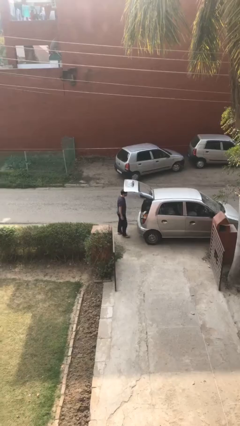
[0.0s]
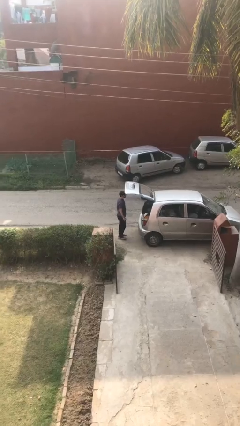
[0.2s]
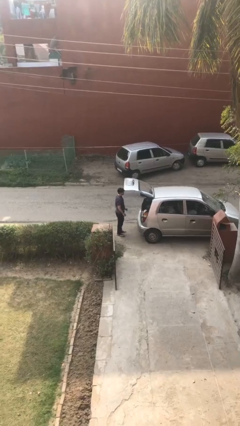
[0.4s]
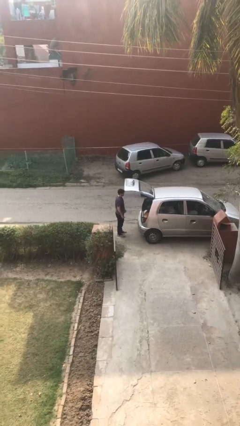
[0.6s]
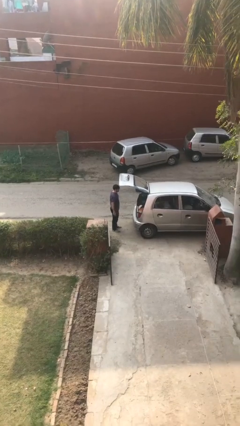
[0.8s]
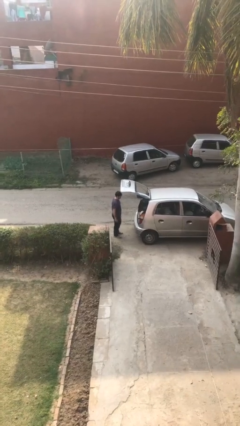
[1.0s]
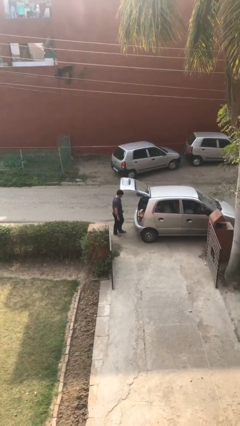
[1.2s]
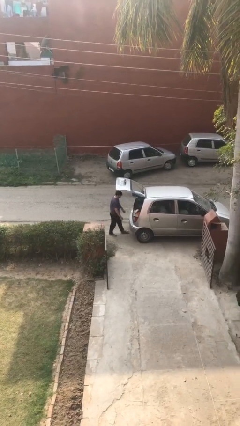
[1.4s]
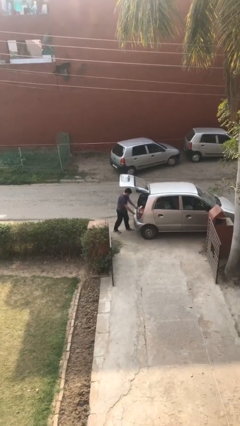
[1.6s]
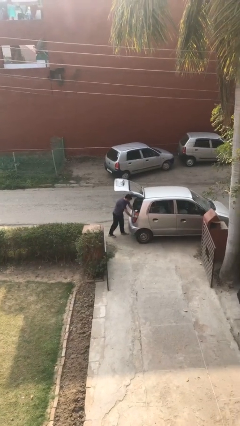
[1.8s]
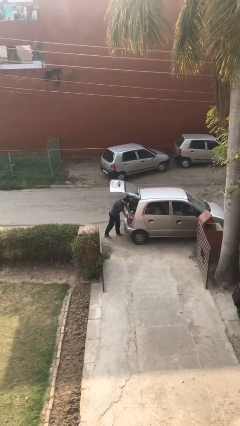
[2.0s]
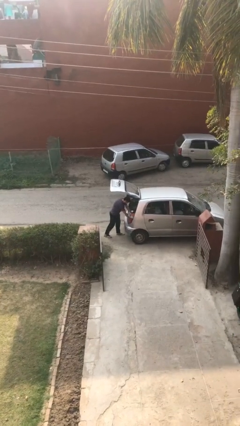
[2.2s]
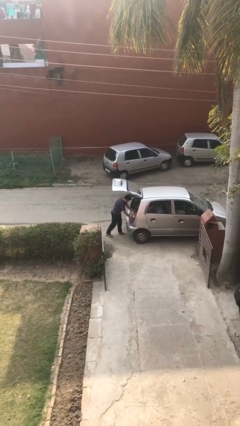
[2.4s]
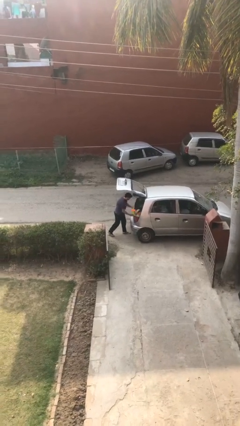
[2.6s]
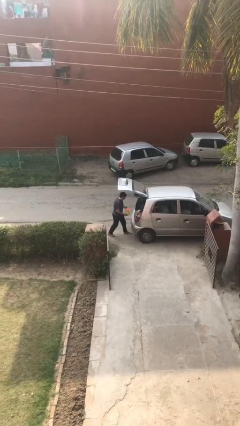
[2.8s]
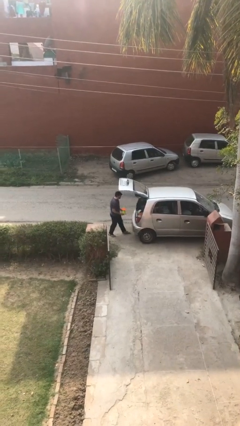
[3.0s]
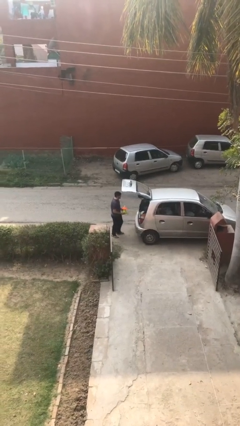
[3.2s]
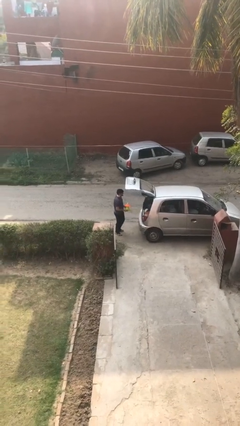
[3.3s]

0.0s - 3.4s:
person unloads car

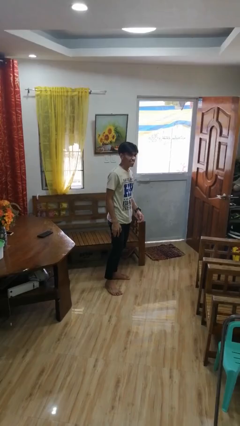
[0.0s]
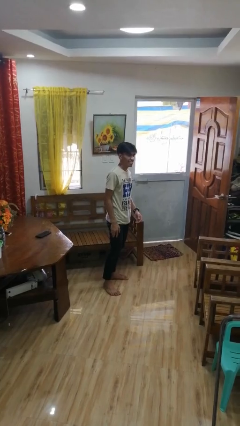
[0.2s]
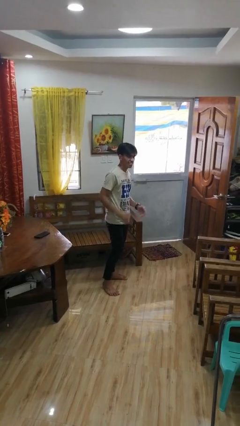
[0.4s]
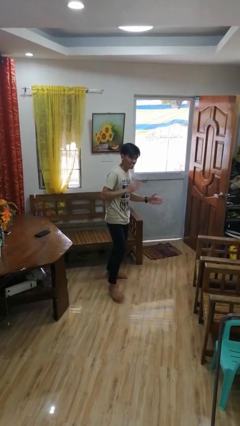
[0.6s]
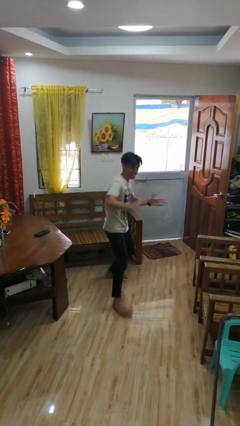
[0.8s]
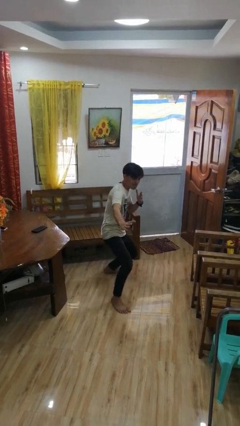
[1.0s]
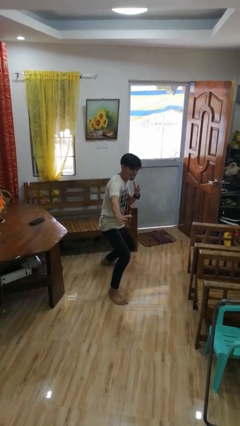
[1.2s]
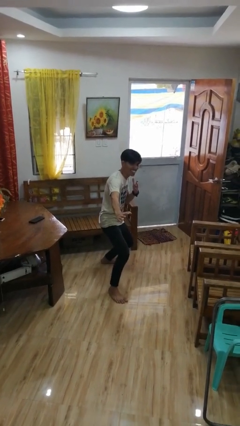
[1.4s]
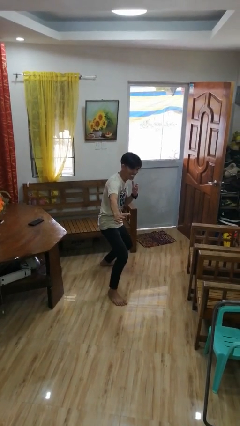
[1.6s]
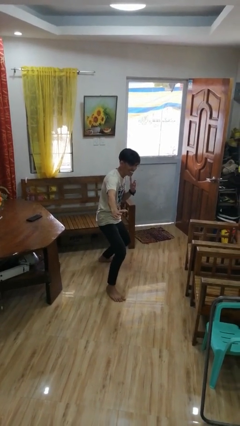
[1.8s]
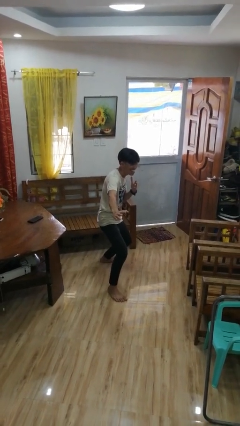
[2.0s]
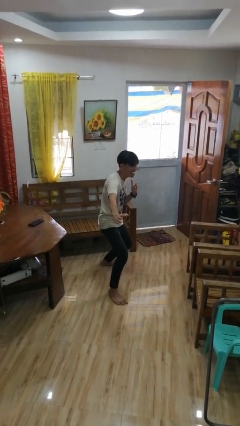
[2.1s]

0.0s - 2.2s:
person karate chop

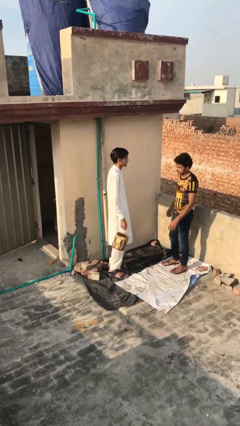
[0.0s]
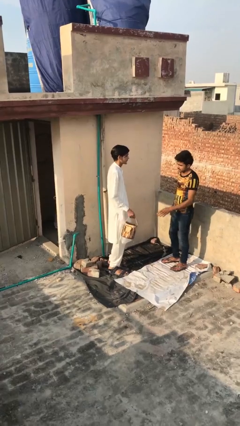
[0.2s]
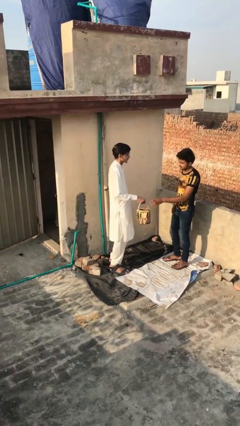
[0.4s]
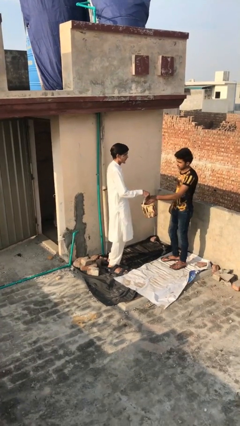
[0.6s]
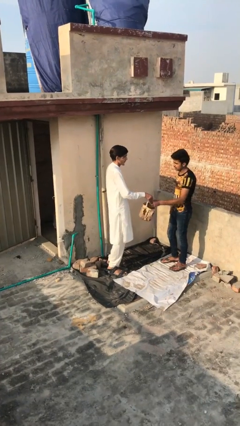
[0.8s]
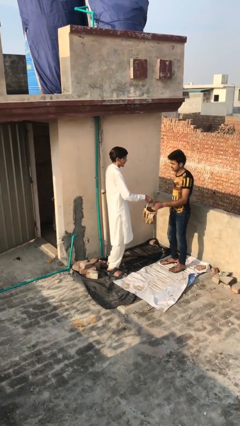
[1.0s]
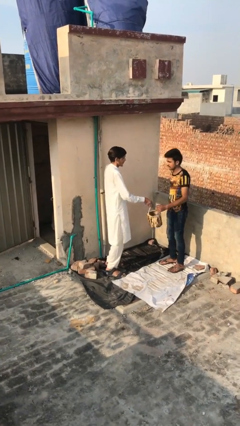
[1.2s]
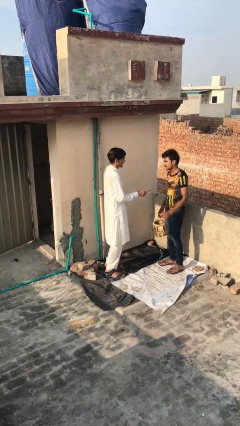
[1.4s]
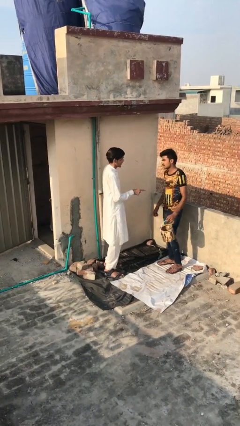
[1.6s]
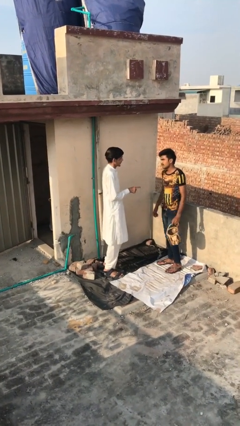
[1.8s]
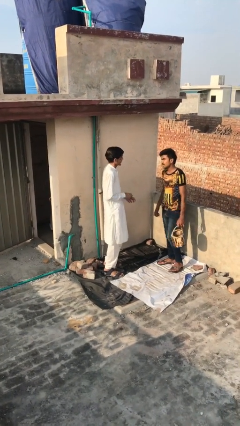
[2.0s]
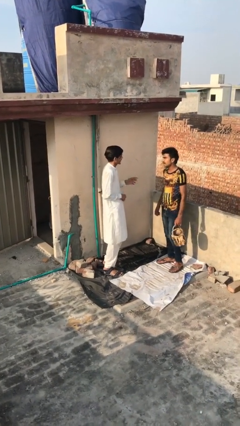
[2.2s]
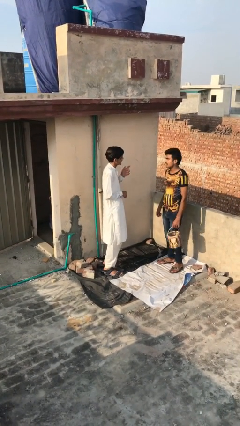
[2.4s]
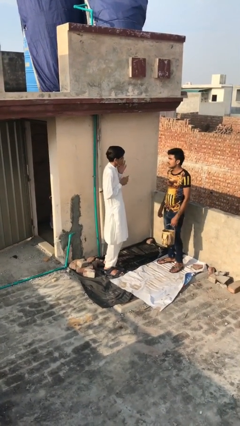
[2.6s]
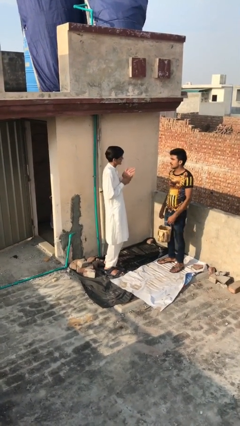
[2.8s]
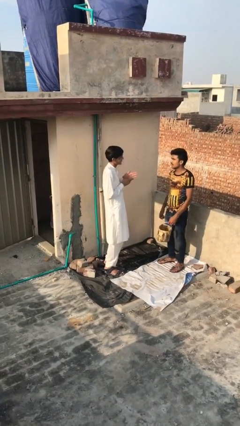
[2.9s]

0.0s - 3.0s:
person transfers object to person

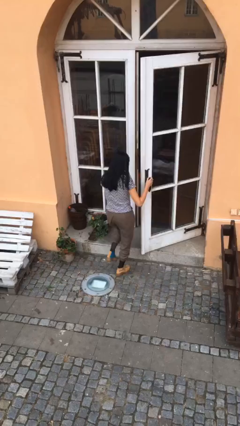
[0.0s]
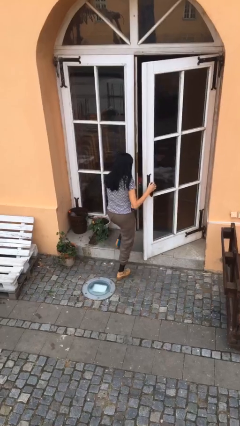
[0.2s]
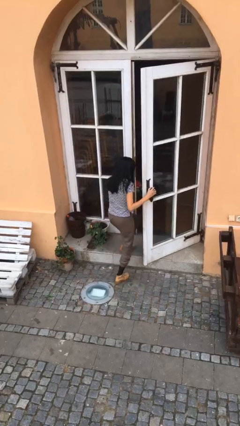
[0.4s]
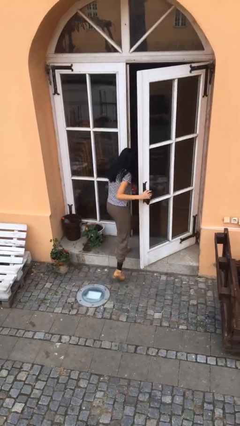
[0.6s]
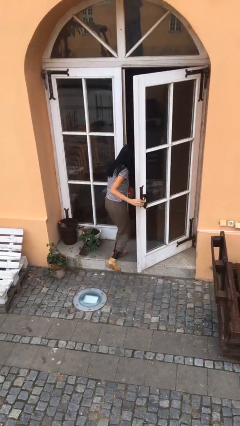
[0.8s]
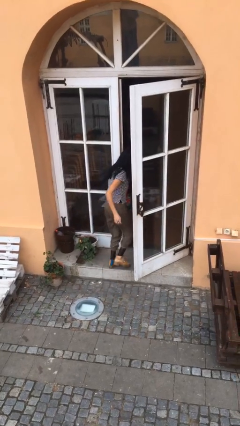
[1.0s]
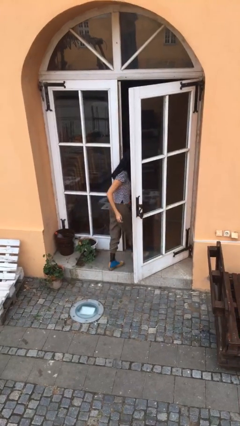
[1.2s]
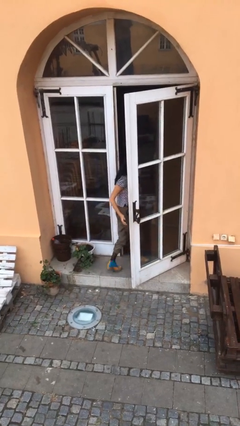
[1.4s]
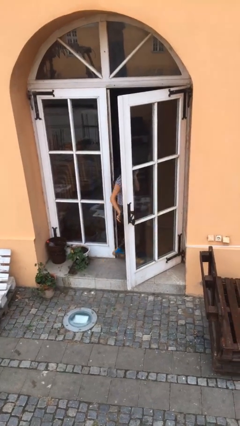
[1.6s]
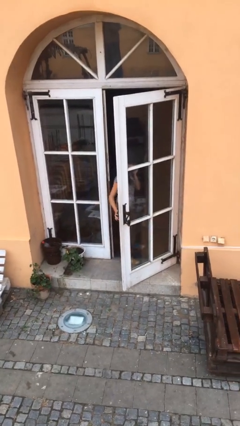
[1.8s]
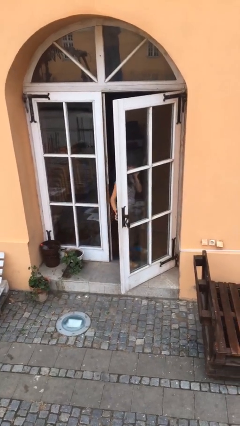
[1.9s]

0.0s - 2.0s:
person exits scene through structure

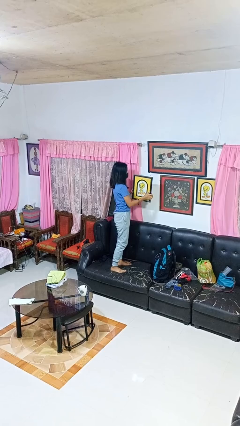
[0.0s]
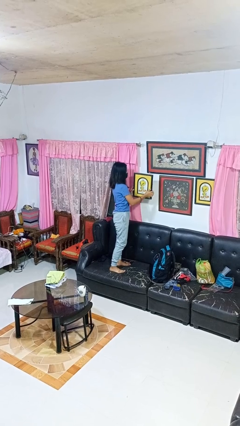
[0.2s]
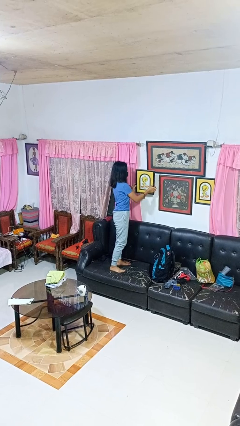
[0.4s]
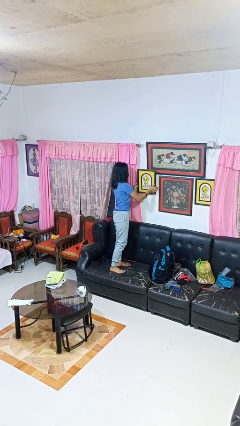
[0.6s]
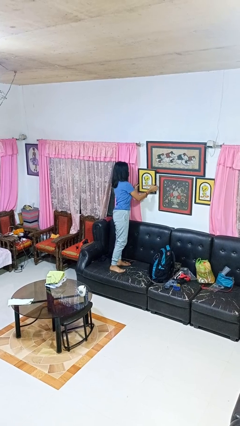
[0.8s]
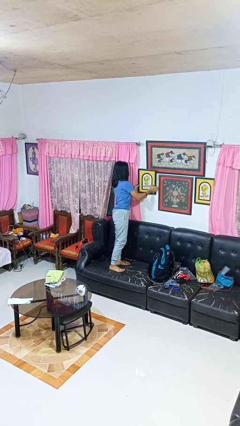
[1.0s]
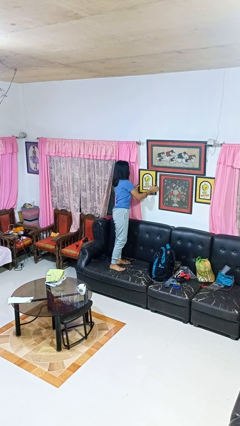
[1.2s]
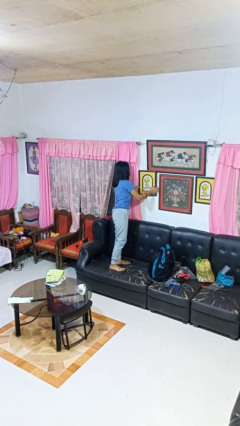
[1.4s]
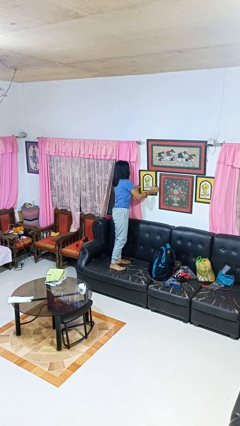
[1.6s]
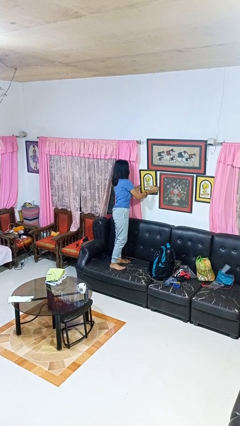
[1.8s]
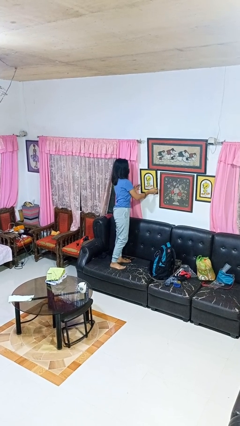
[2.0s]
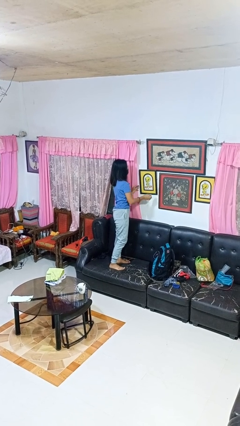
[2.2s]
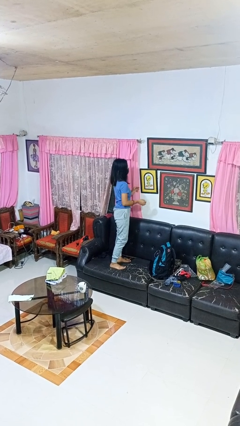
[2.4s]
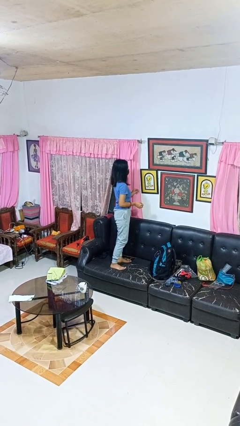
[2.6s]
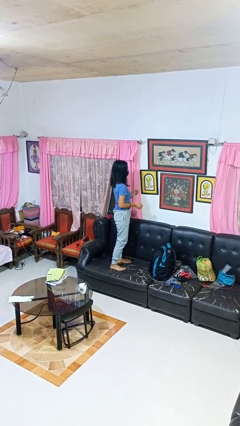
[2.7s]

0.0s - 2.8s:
person puts up picture frame

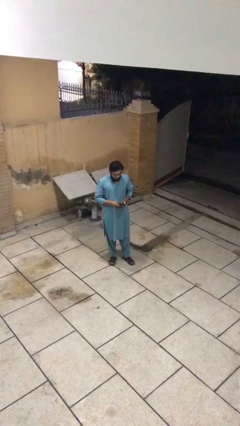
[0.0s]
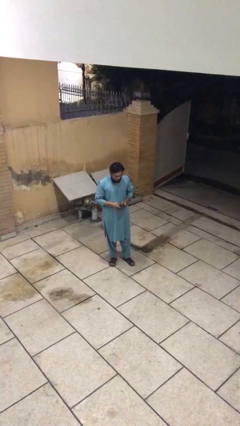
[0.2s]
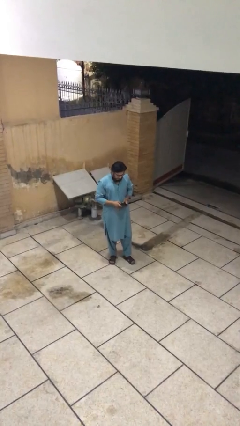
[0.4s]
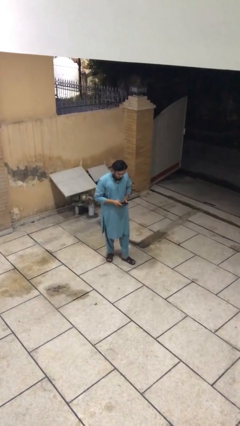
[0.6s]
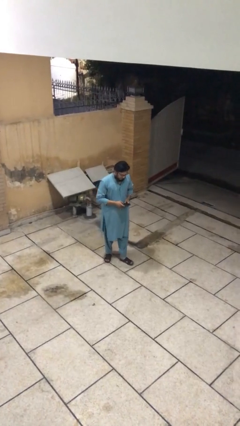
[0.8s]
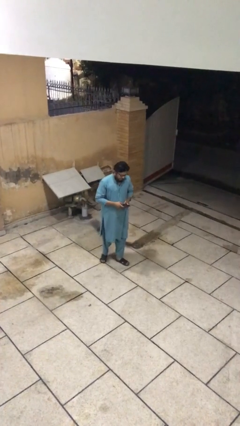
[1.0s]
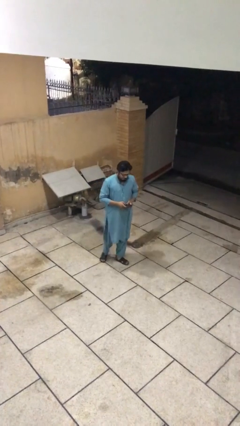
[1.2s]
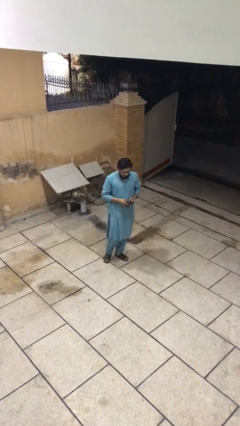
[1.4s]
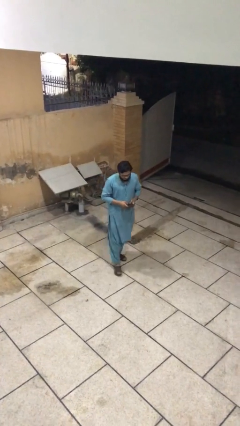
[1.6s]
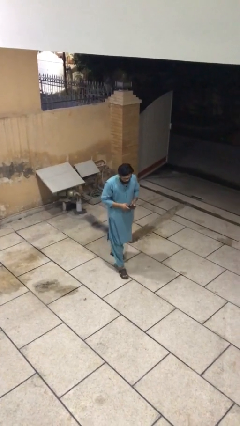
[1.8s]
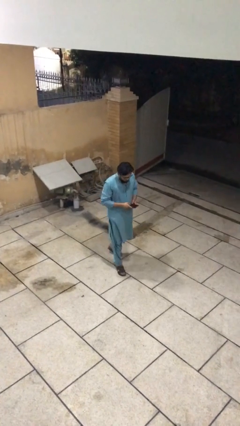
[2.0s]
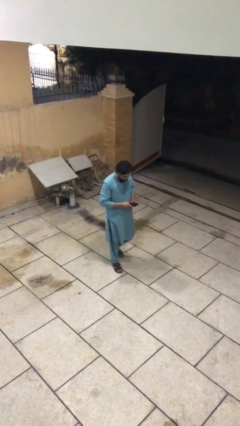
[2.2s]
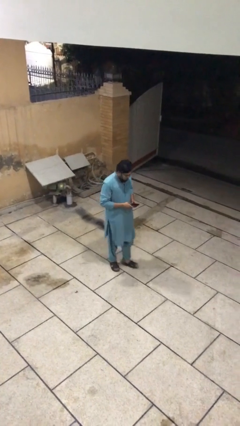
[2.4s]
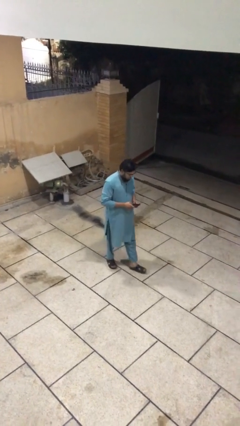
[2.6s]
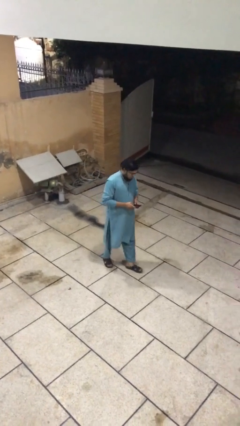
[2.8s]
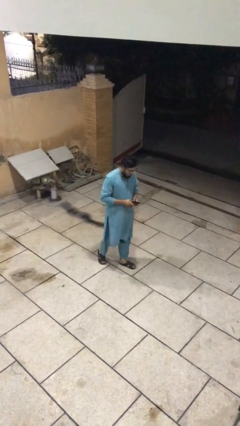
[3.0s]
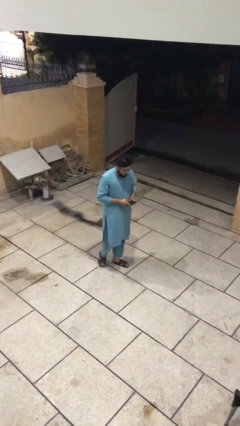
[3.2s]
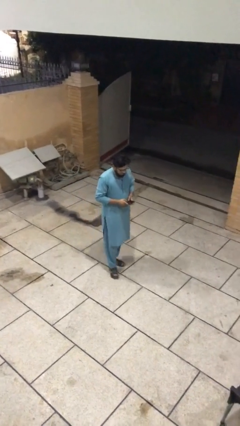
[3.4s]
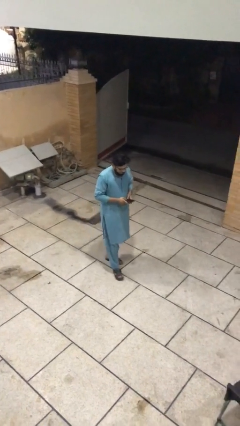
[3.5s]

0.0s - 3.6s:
person texts on phone
